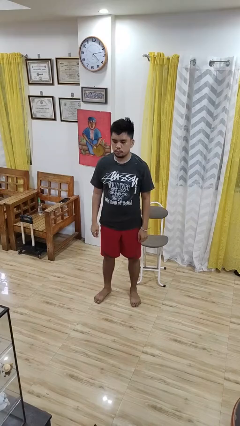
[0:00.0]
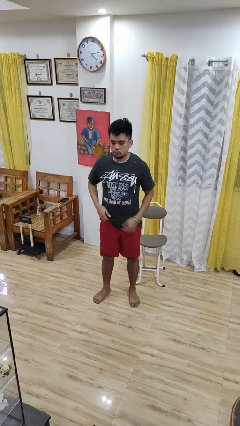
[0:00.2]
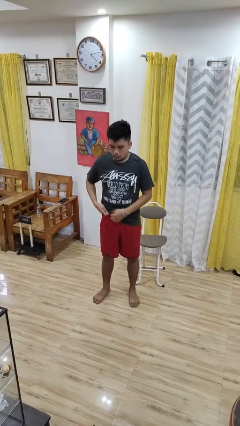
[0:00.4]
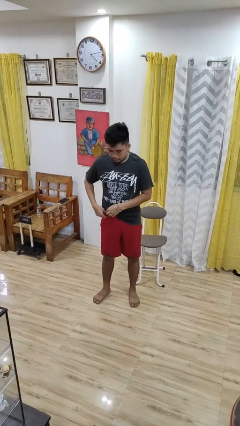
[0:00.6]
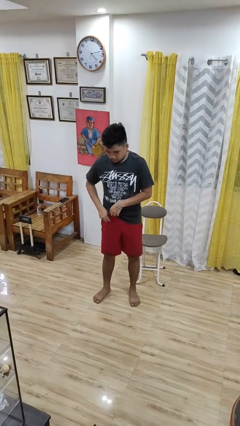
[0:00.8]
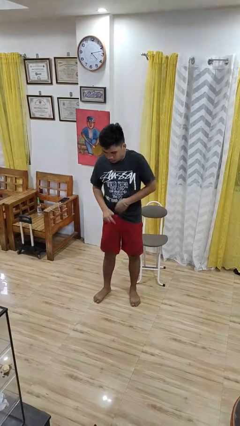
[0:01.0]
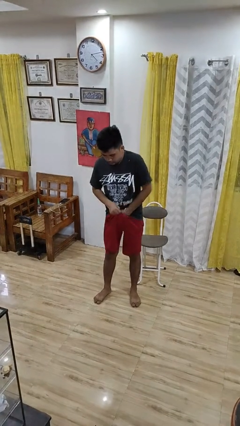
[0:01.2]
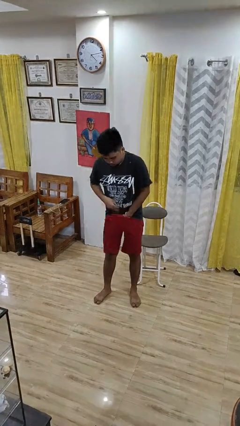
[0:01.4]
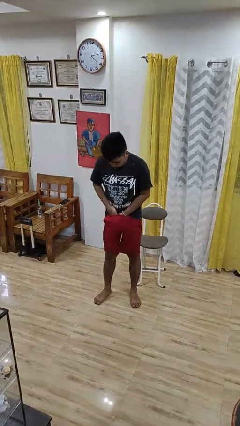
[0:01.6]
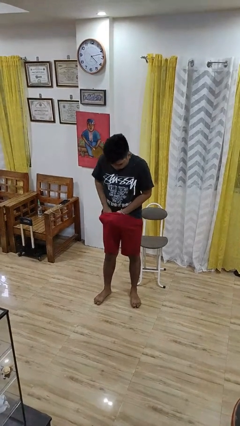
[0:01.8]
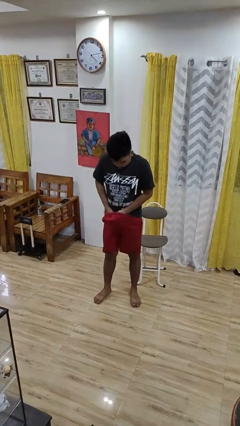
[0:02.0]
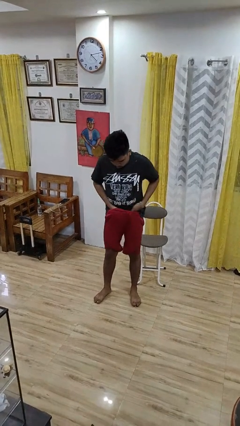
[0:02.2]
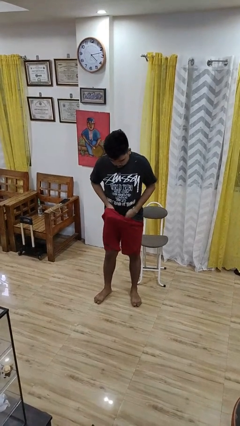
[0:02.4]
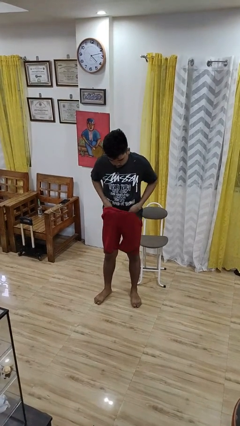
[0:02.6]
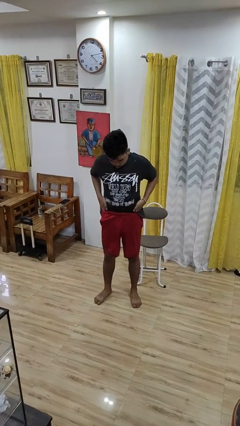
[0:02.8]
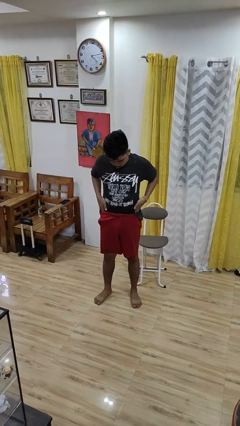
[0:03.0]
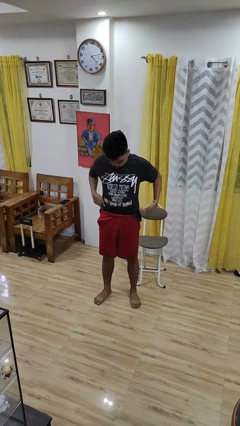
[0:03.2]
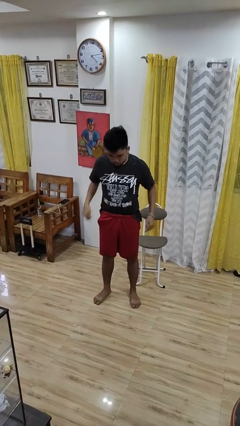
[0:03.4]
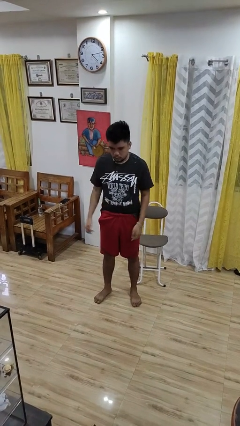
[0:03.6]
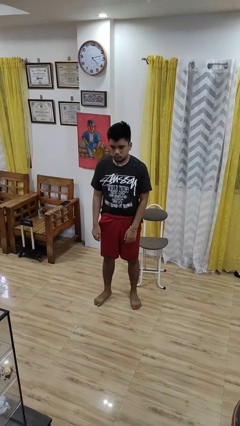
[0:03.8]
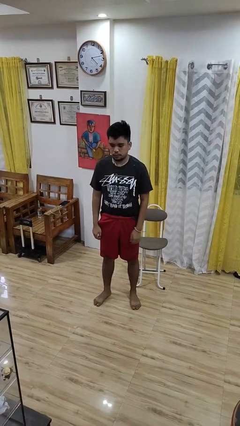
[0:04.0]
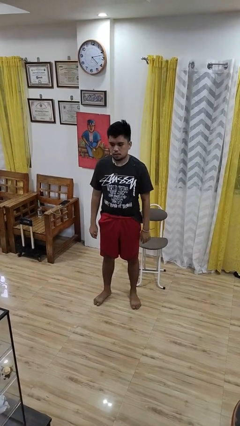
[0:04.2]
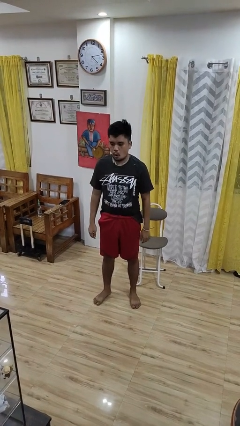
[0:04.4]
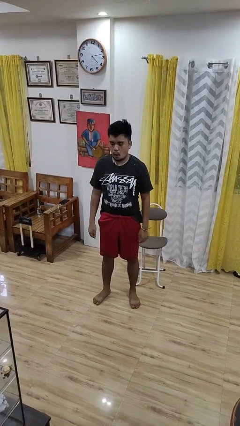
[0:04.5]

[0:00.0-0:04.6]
person tucks in shirt

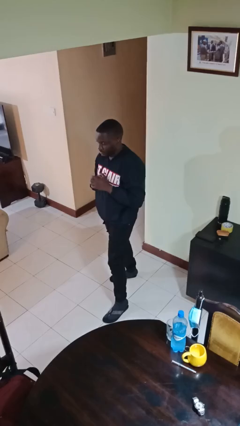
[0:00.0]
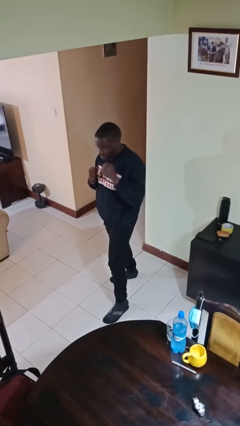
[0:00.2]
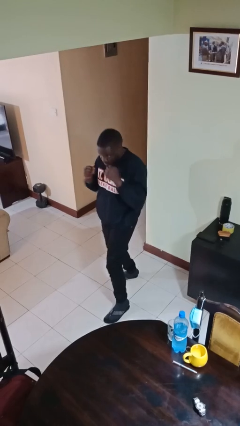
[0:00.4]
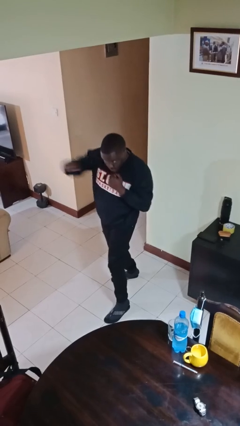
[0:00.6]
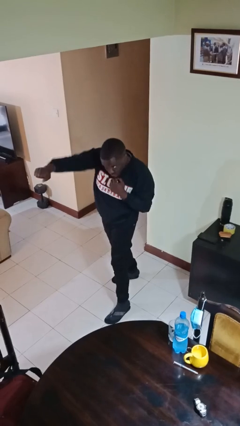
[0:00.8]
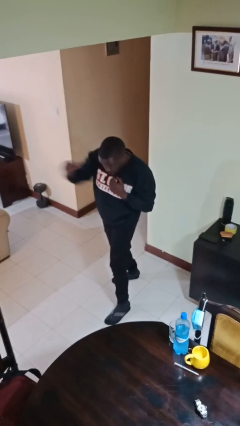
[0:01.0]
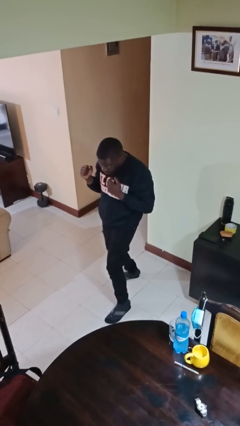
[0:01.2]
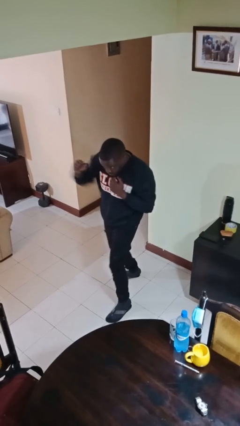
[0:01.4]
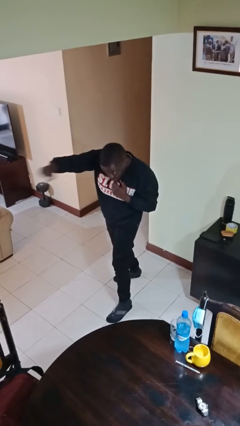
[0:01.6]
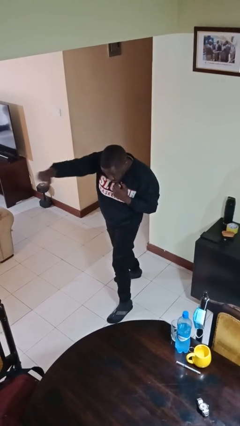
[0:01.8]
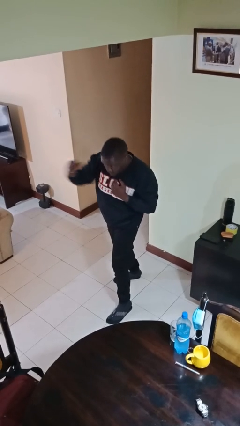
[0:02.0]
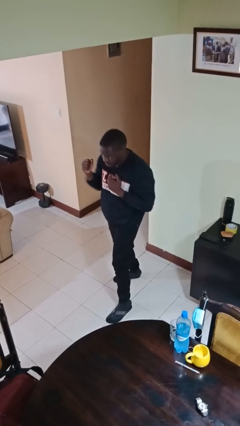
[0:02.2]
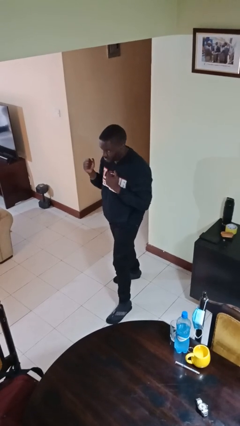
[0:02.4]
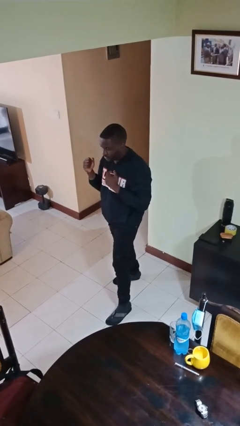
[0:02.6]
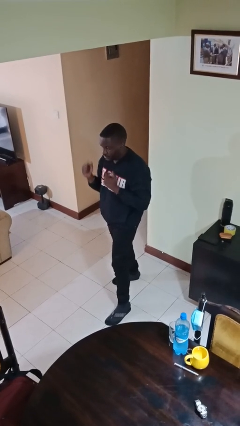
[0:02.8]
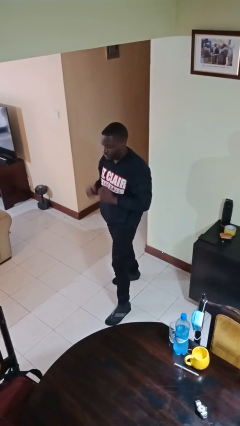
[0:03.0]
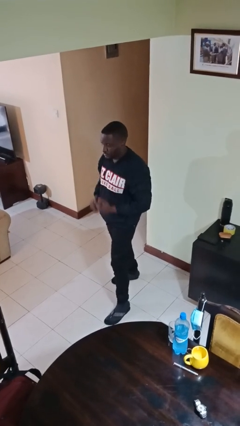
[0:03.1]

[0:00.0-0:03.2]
person punches

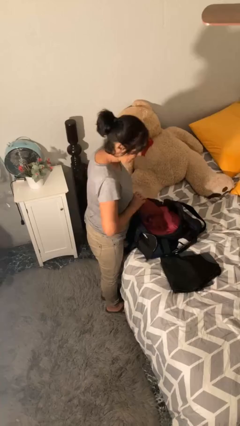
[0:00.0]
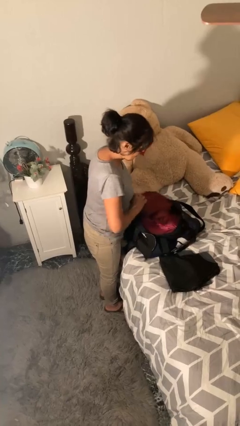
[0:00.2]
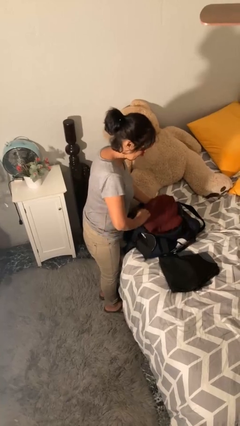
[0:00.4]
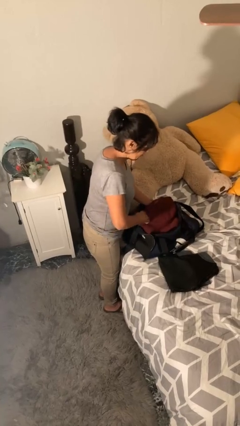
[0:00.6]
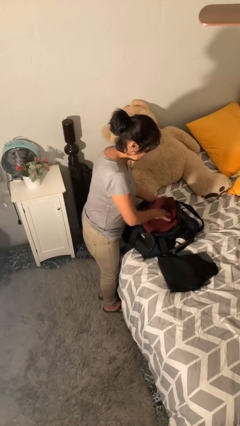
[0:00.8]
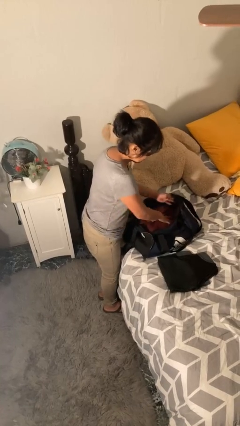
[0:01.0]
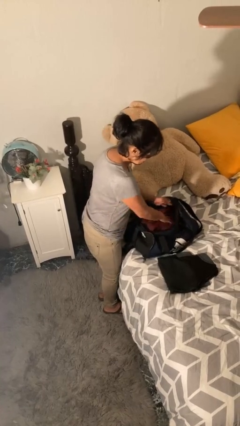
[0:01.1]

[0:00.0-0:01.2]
person loads clothes into suitcase

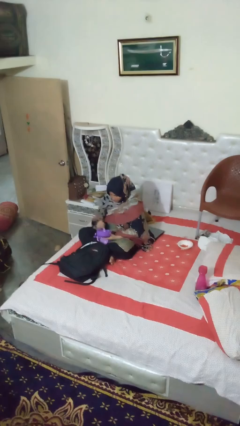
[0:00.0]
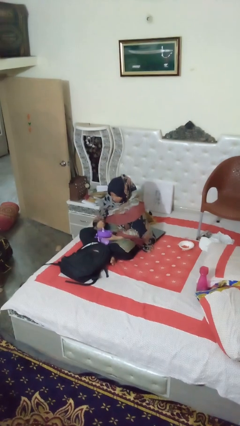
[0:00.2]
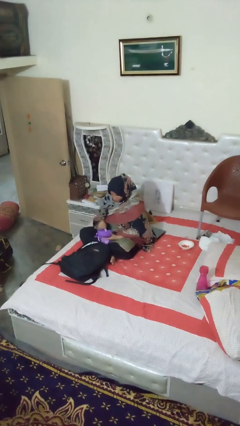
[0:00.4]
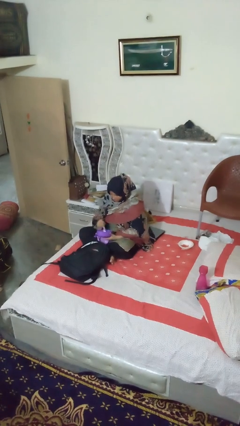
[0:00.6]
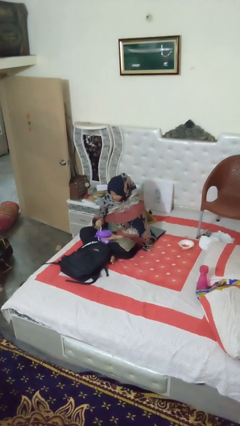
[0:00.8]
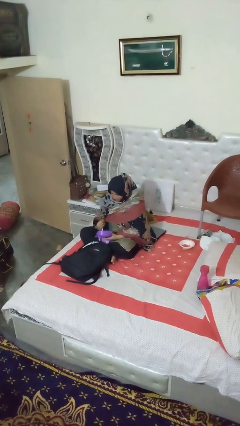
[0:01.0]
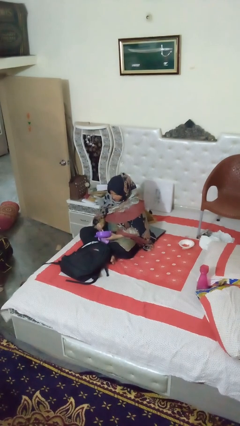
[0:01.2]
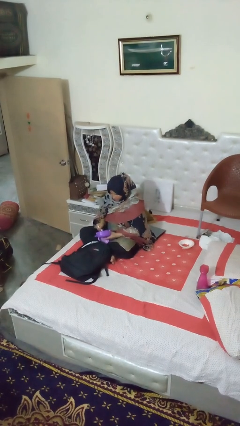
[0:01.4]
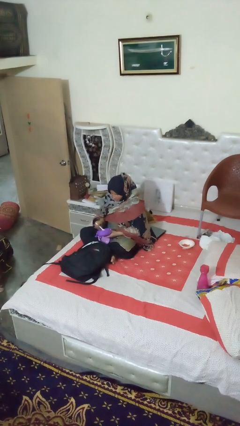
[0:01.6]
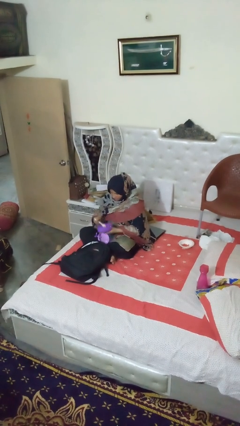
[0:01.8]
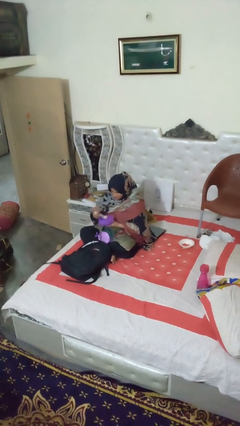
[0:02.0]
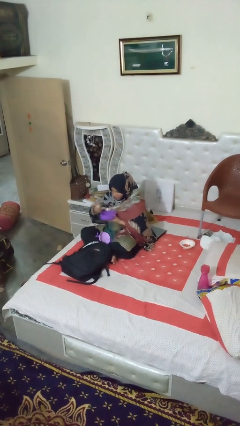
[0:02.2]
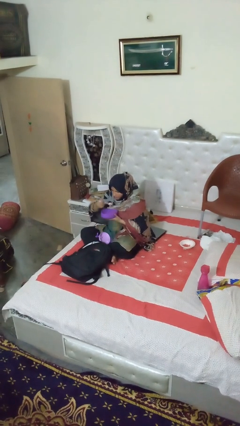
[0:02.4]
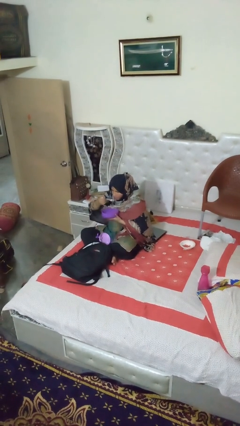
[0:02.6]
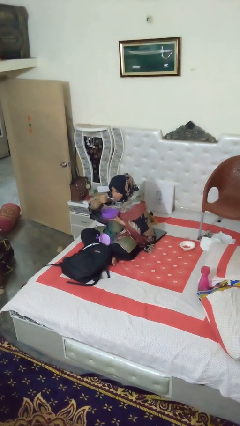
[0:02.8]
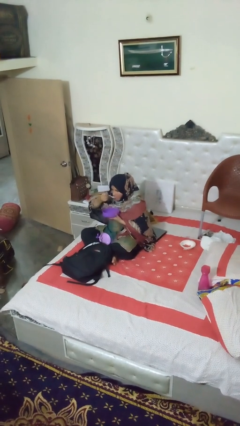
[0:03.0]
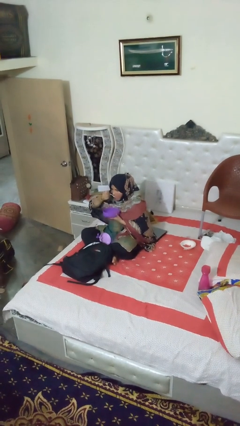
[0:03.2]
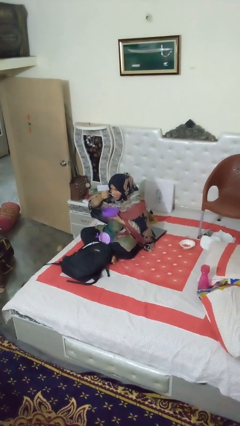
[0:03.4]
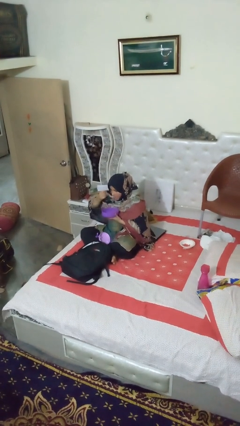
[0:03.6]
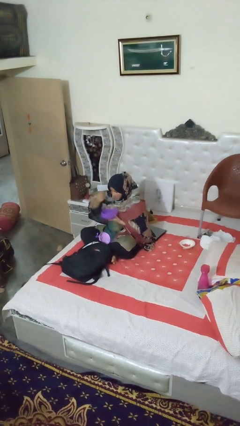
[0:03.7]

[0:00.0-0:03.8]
person eats snack from bag

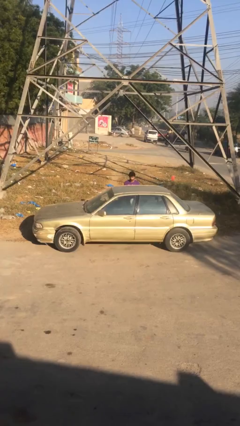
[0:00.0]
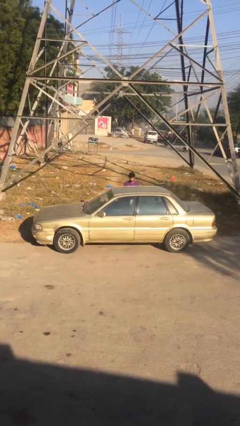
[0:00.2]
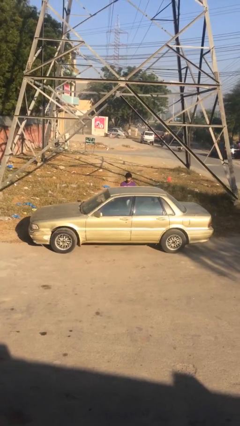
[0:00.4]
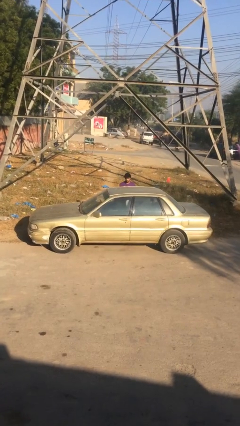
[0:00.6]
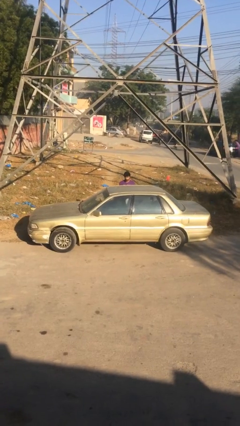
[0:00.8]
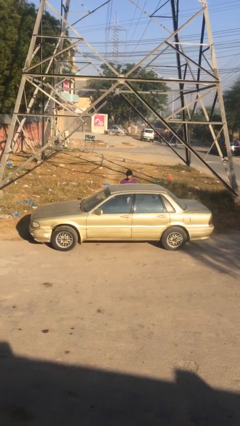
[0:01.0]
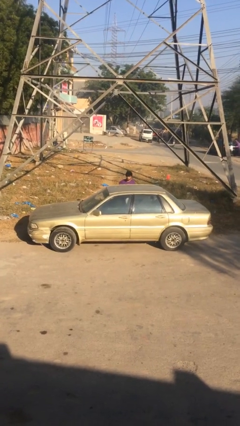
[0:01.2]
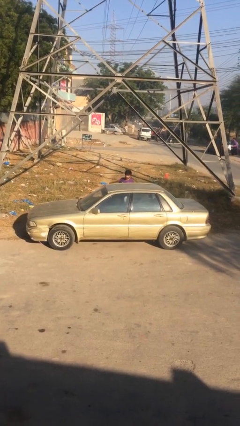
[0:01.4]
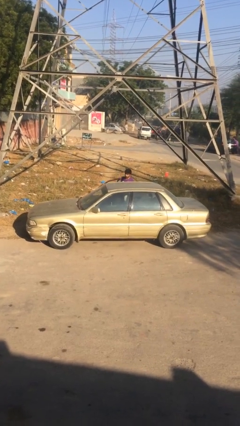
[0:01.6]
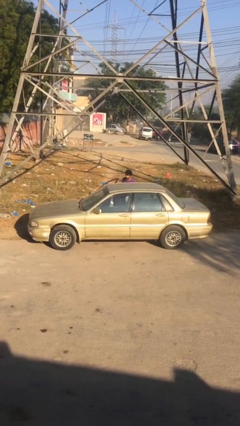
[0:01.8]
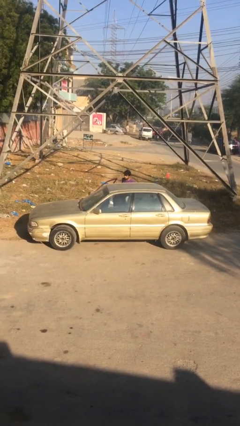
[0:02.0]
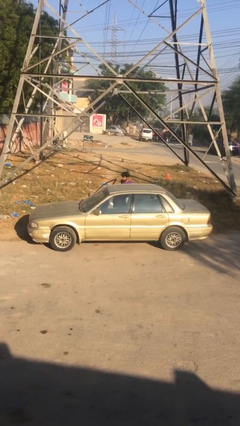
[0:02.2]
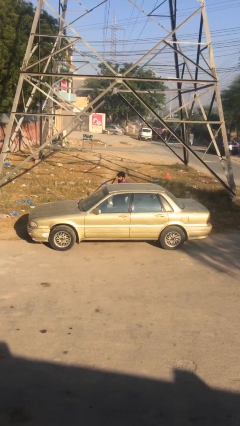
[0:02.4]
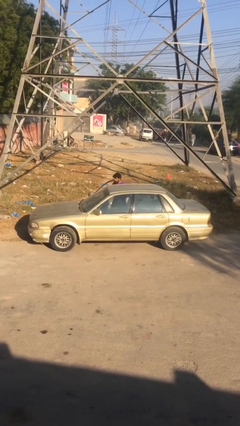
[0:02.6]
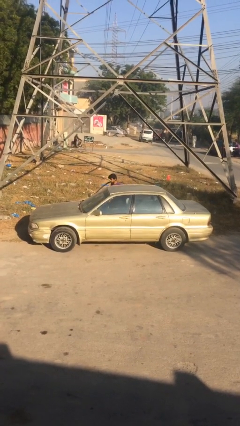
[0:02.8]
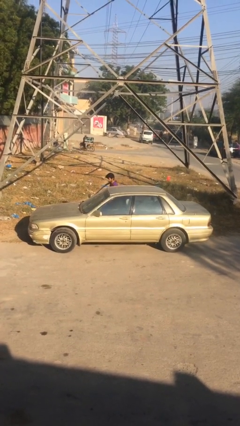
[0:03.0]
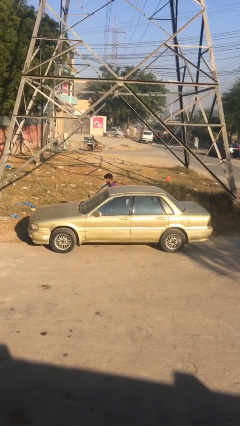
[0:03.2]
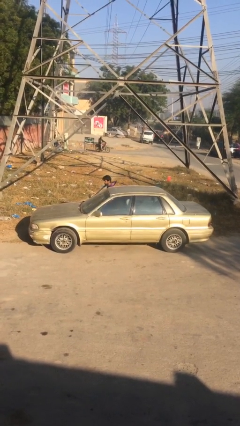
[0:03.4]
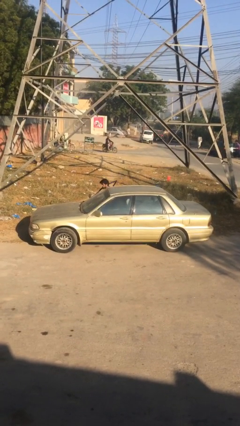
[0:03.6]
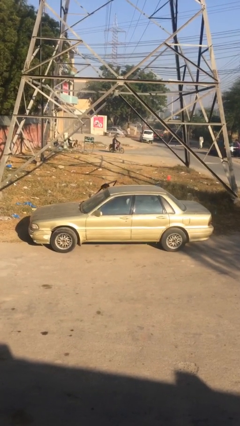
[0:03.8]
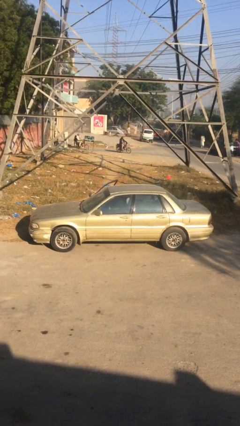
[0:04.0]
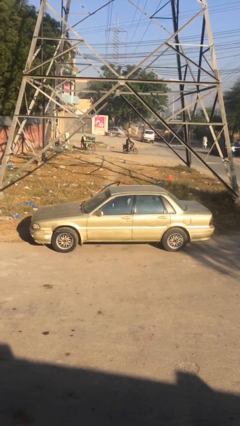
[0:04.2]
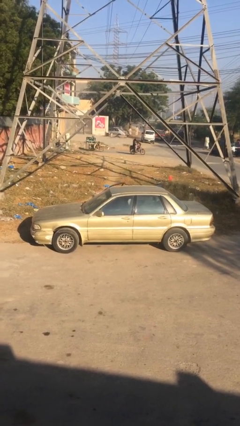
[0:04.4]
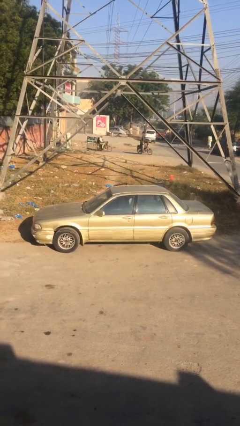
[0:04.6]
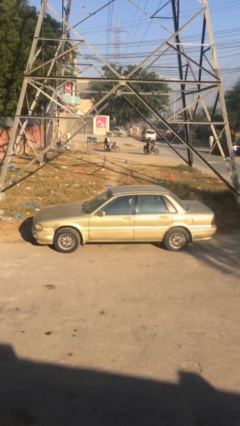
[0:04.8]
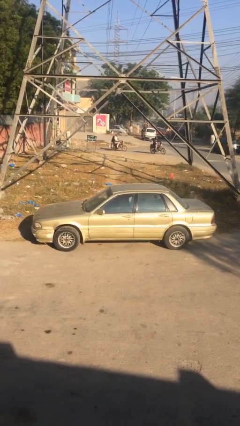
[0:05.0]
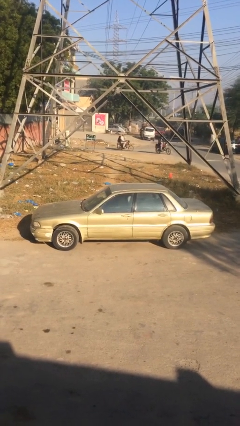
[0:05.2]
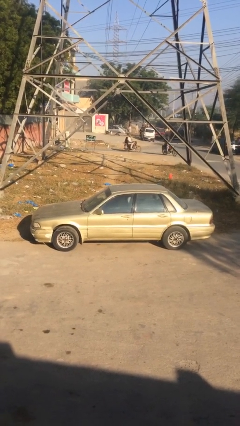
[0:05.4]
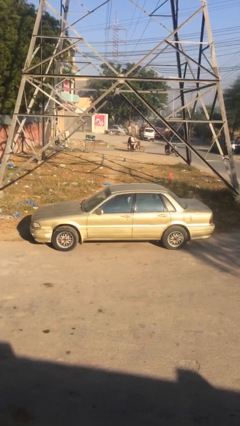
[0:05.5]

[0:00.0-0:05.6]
car picks up person
